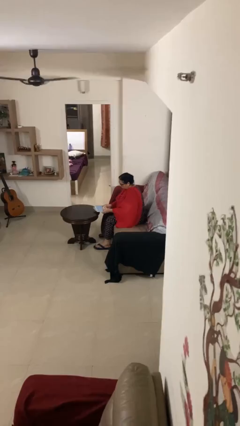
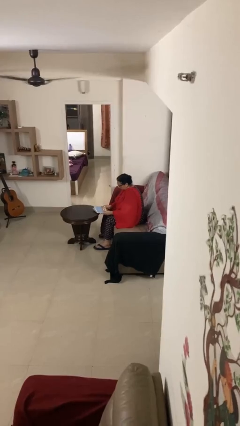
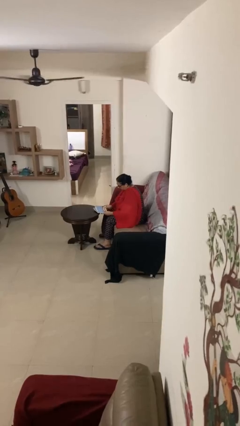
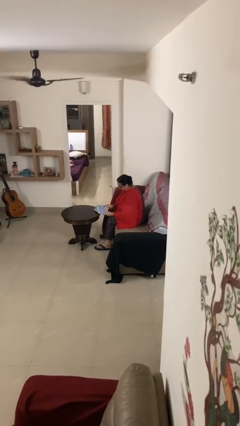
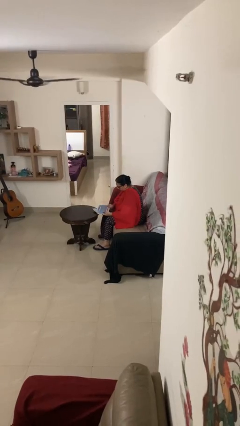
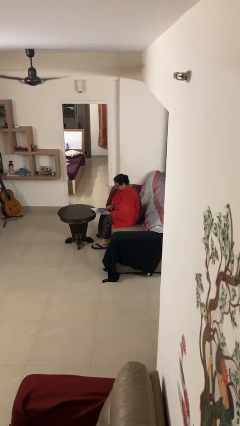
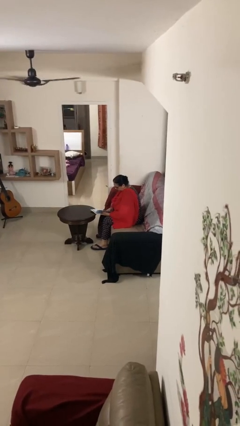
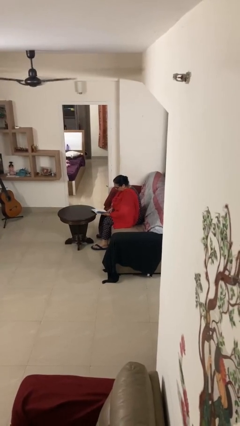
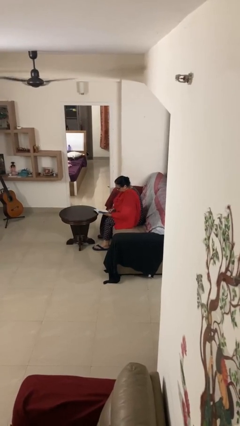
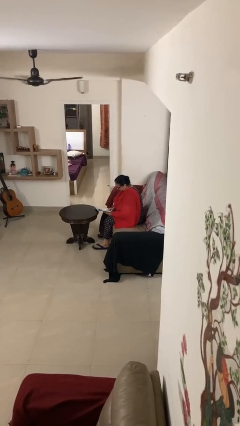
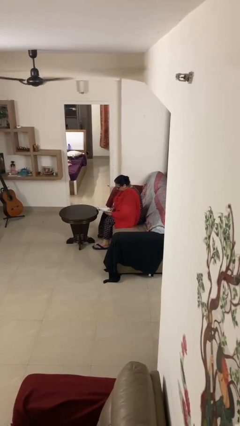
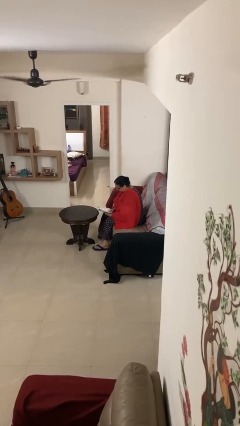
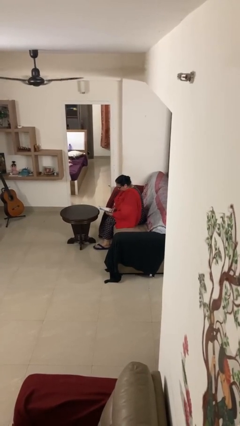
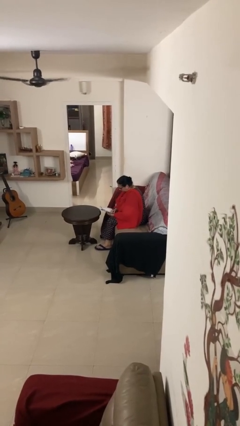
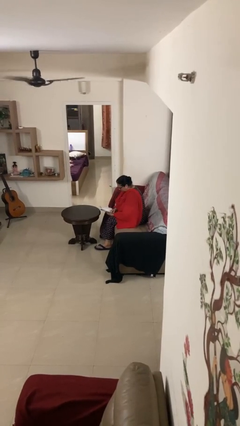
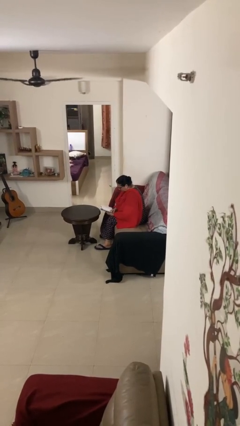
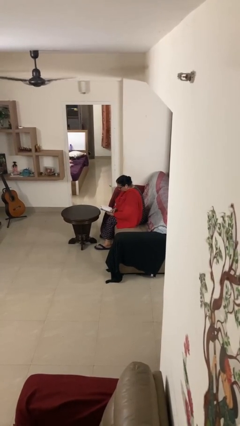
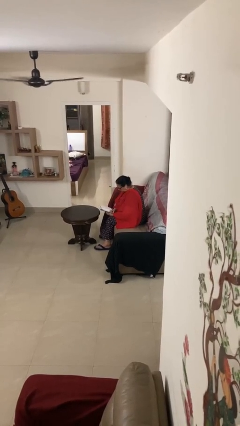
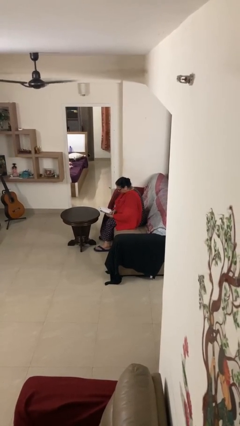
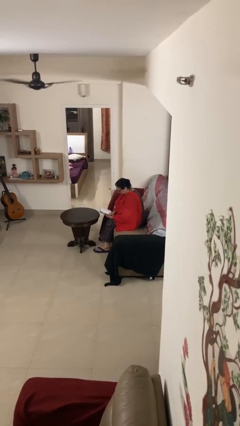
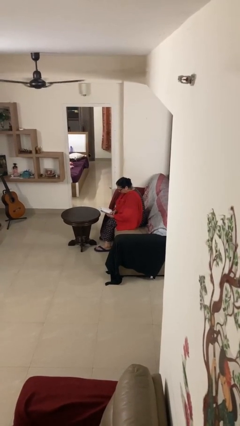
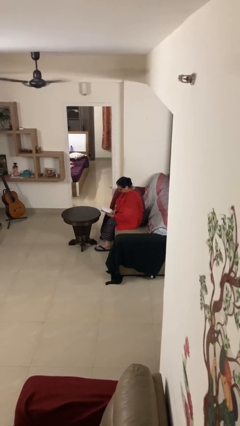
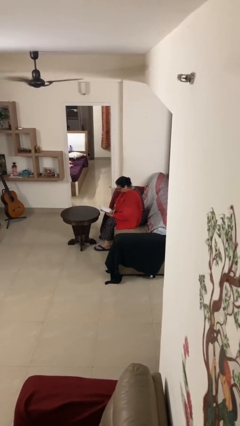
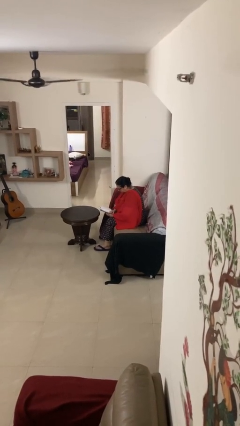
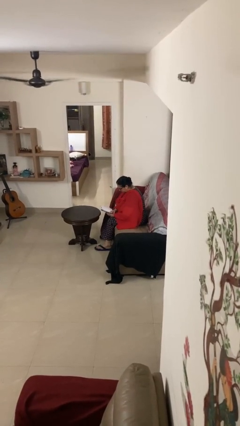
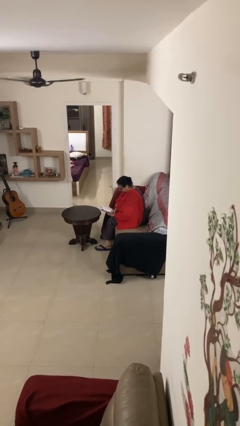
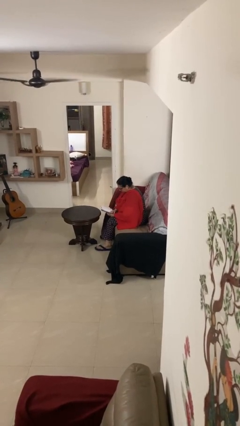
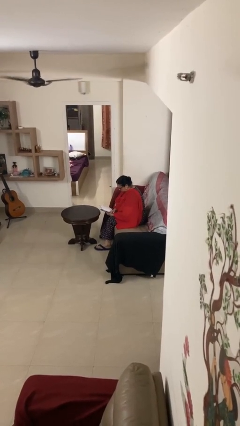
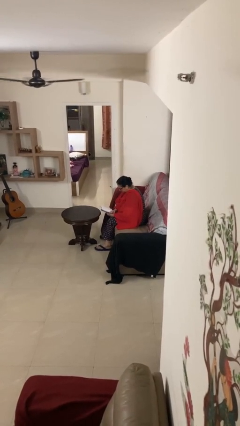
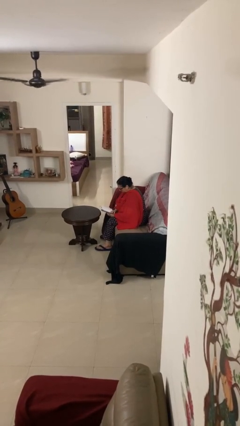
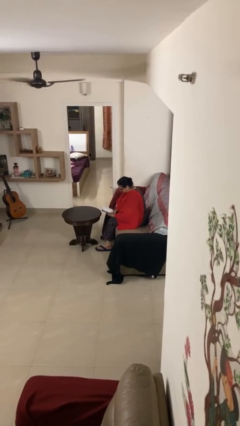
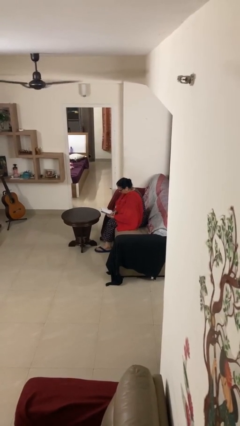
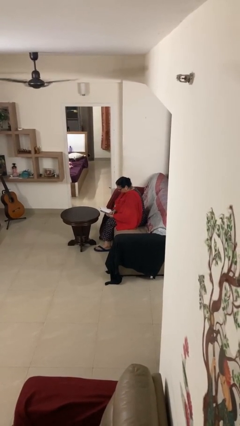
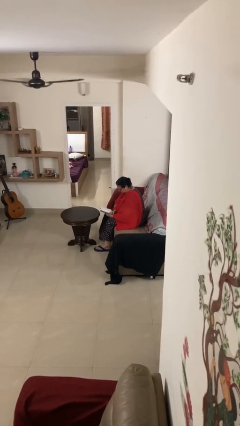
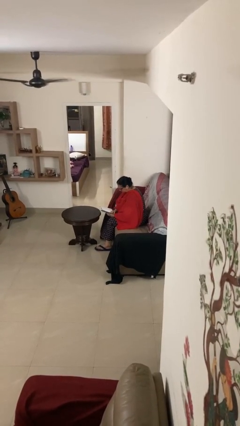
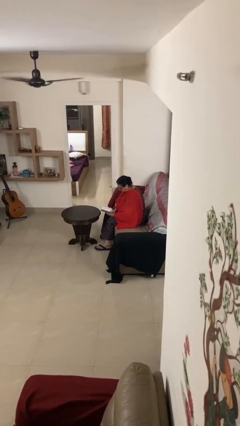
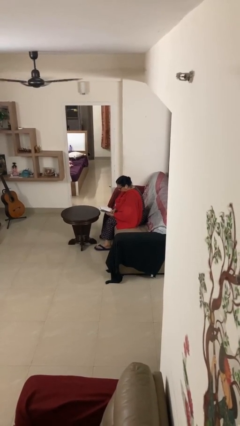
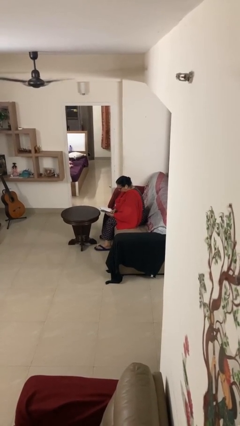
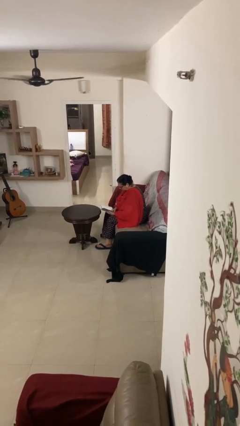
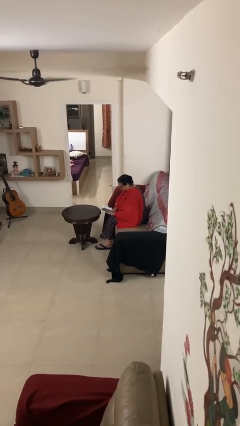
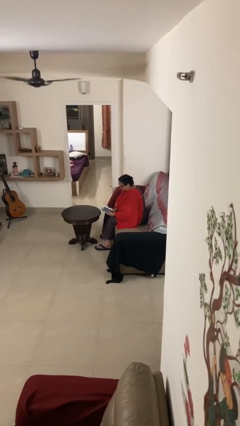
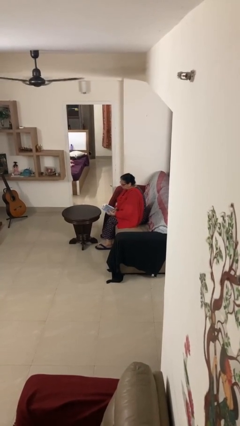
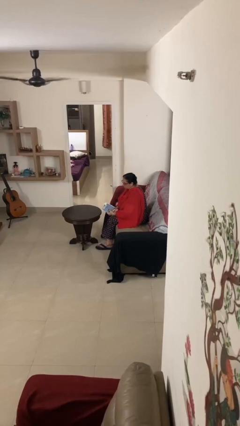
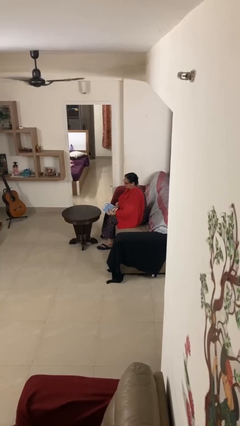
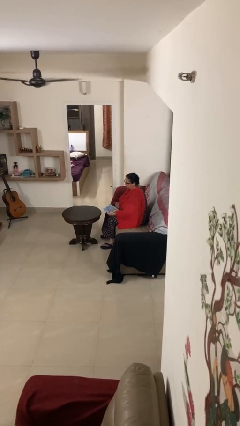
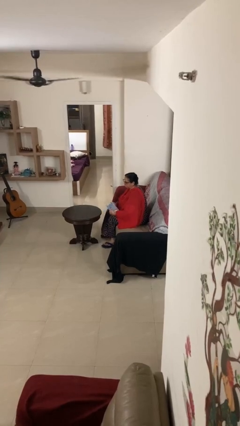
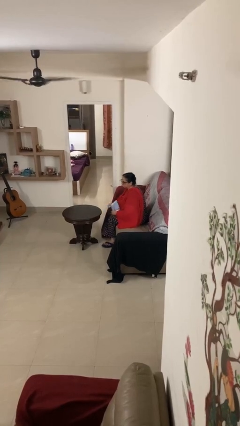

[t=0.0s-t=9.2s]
person reads document

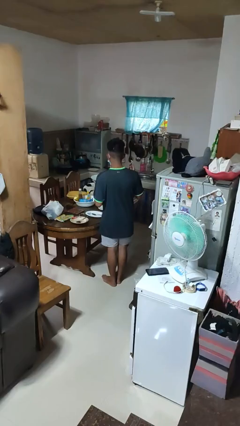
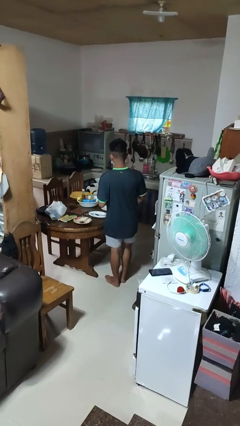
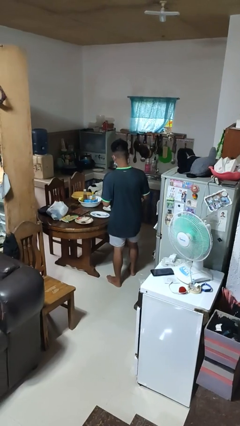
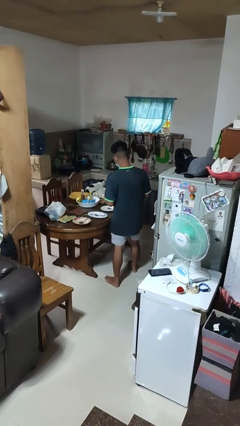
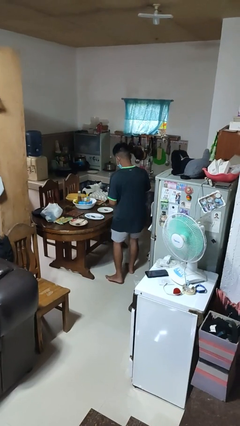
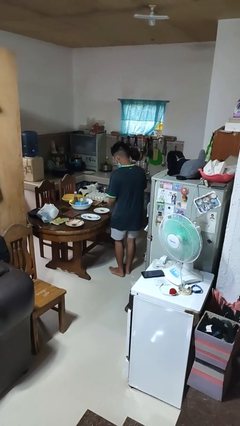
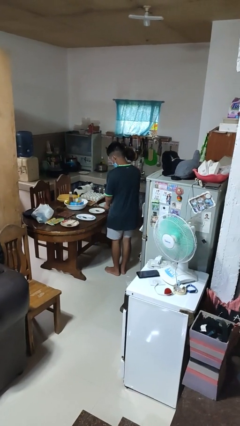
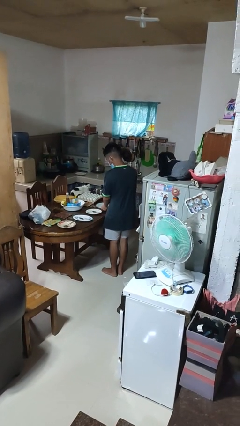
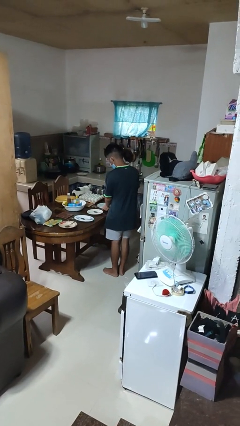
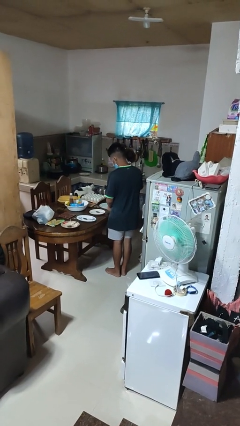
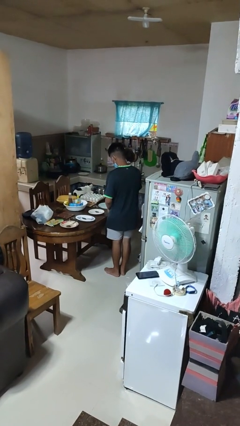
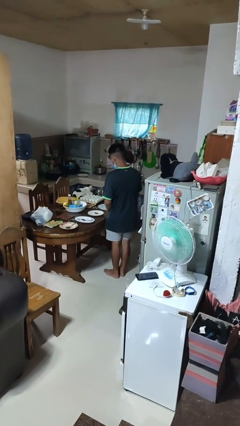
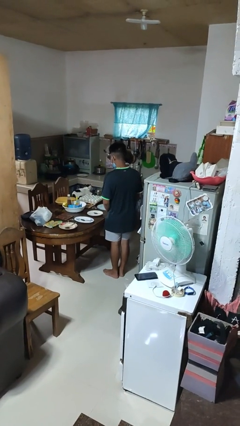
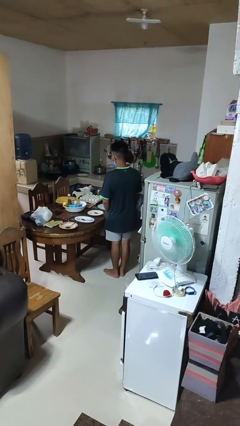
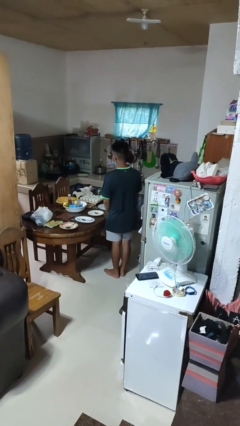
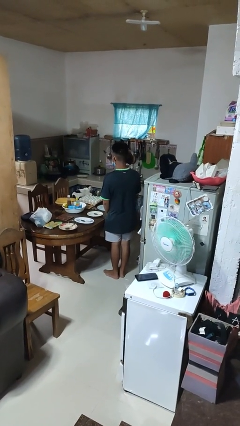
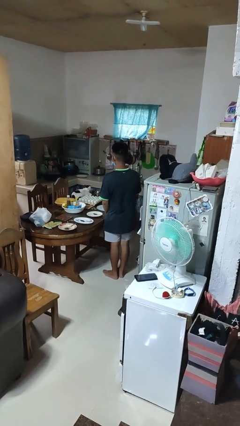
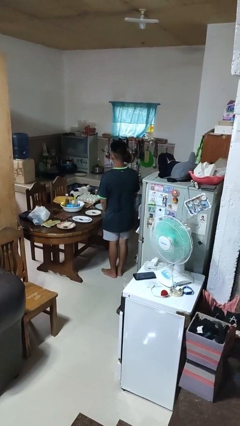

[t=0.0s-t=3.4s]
person sets table

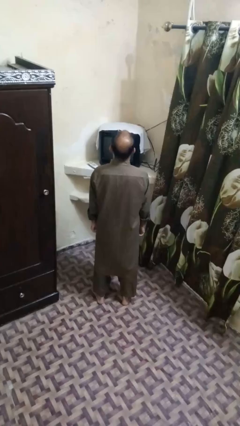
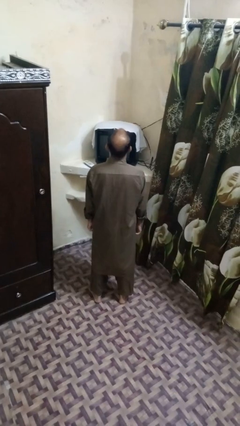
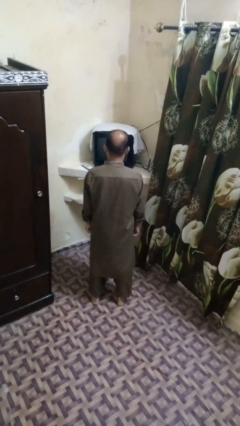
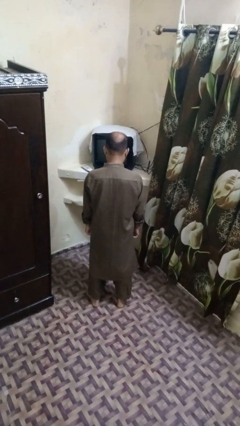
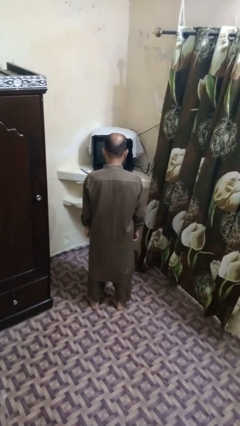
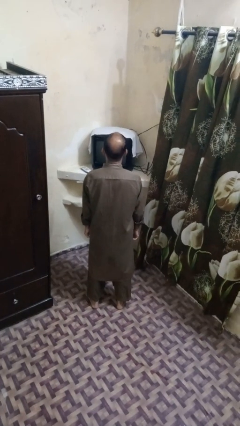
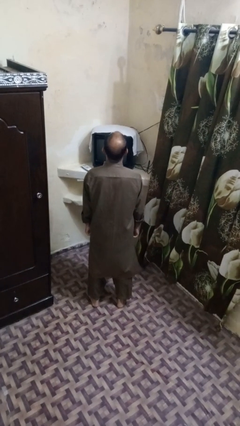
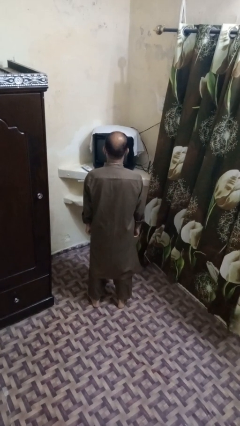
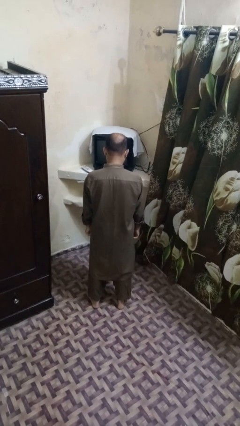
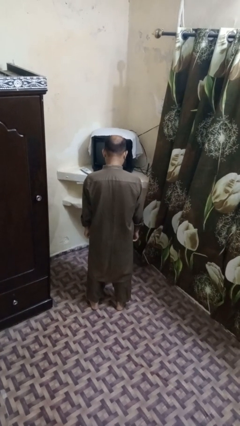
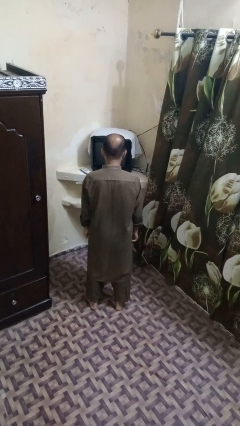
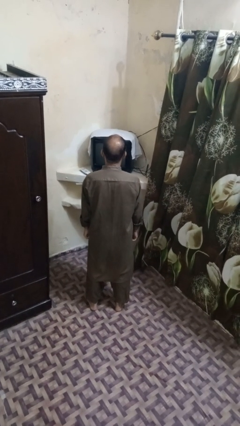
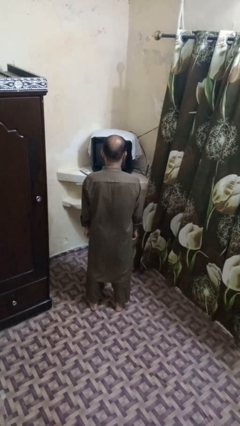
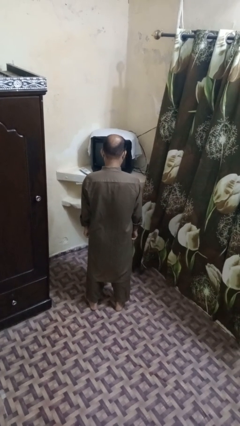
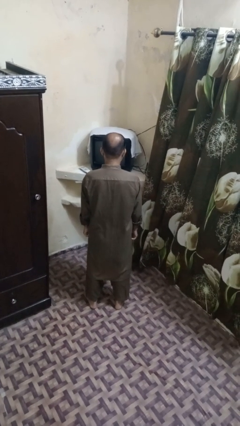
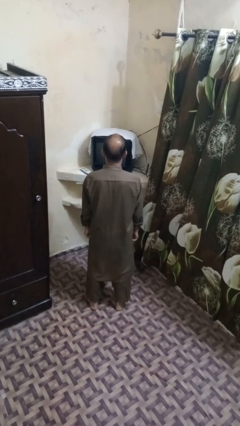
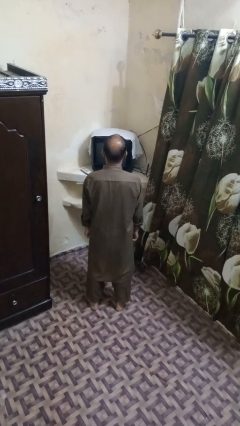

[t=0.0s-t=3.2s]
person nods head

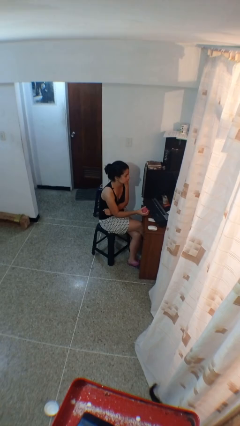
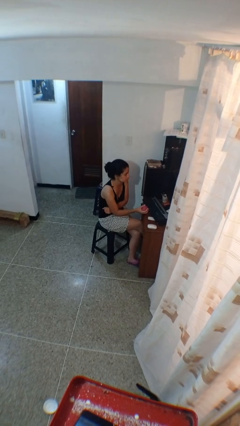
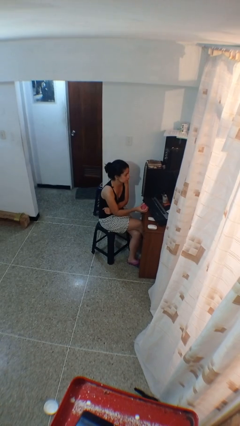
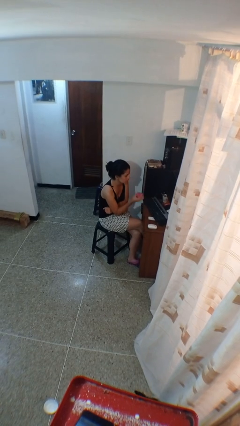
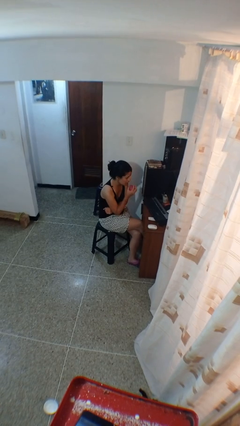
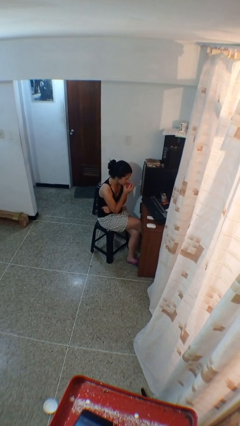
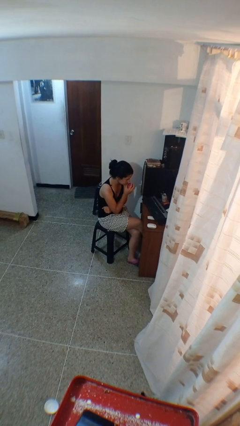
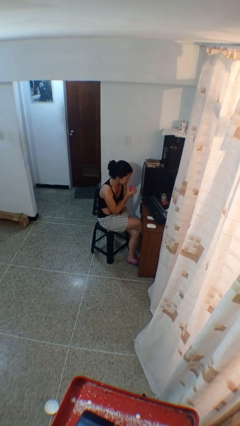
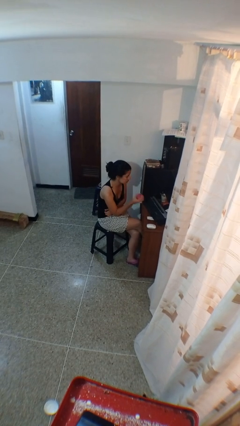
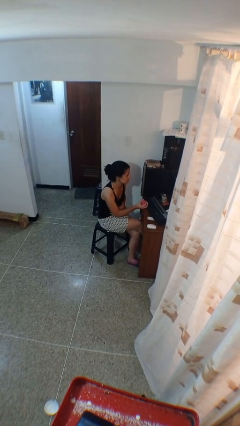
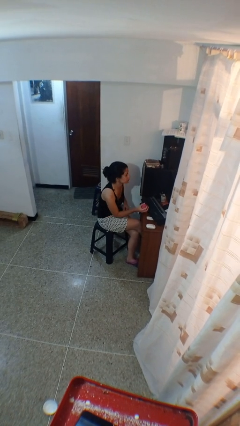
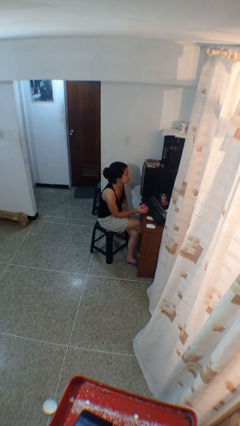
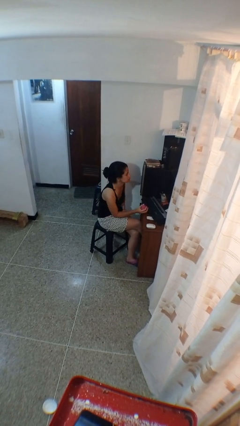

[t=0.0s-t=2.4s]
person eats apple
